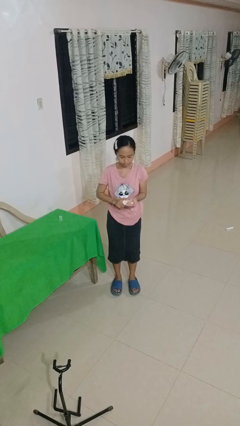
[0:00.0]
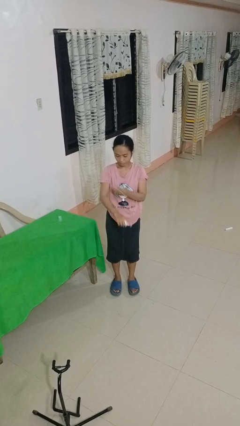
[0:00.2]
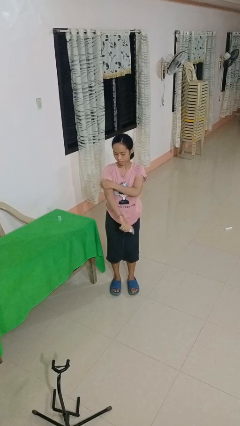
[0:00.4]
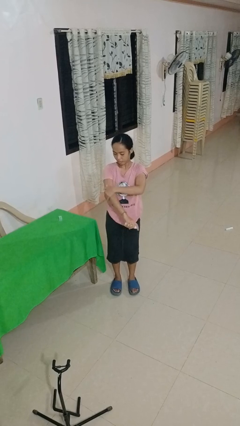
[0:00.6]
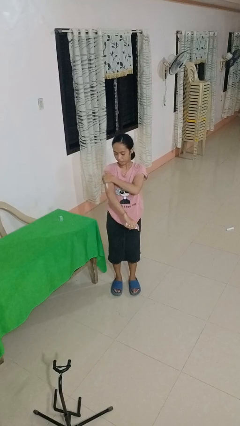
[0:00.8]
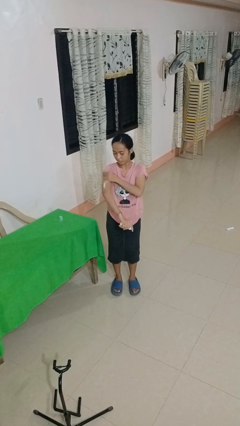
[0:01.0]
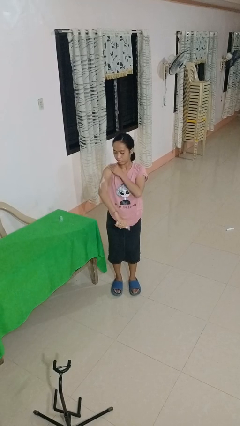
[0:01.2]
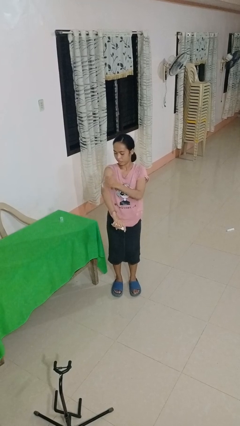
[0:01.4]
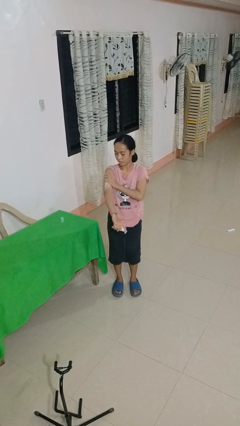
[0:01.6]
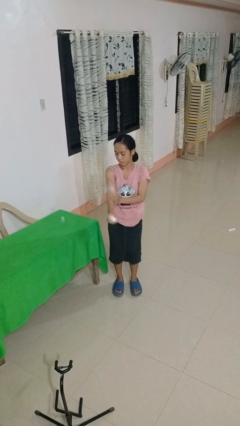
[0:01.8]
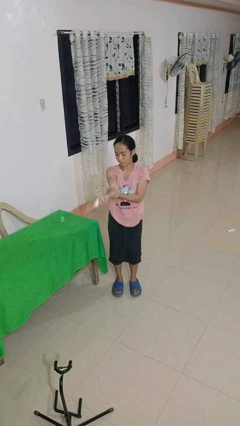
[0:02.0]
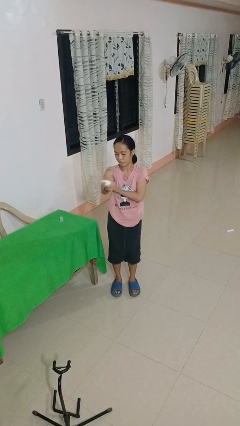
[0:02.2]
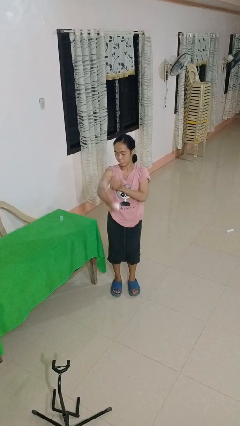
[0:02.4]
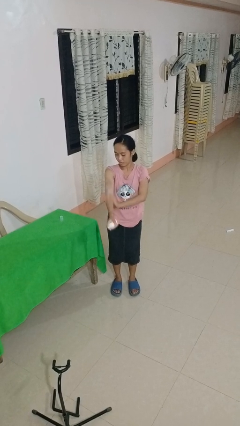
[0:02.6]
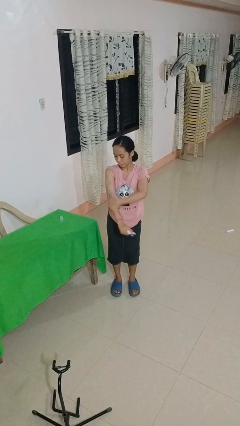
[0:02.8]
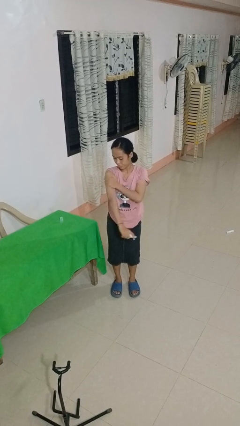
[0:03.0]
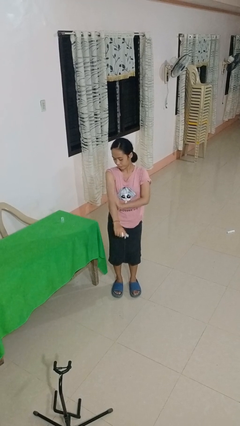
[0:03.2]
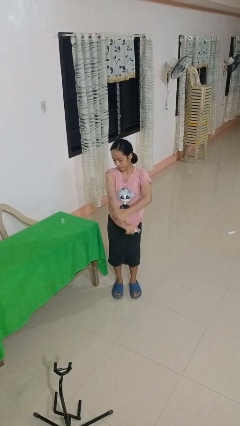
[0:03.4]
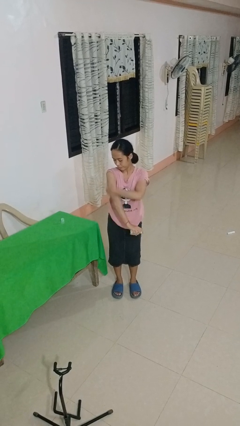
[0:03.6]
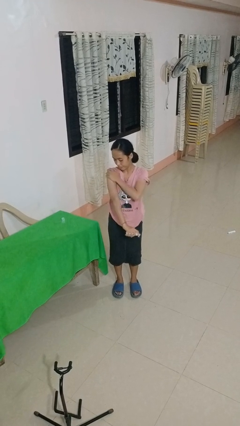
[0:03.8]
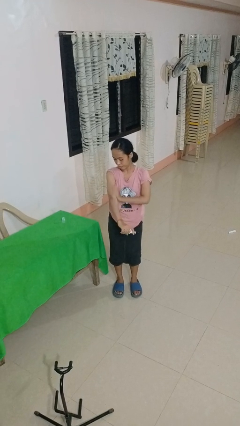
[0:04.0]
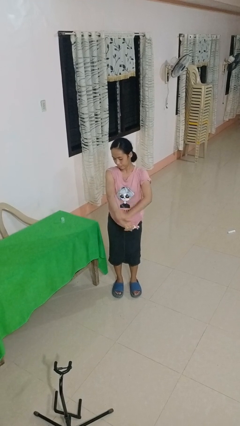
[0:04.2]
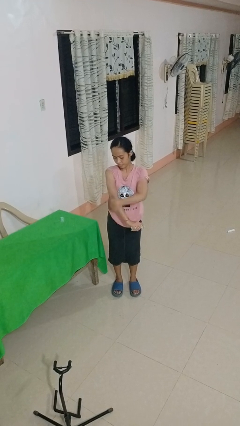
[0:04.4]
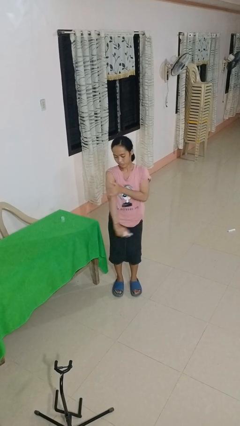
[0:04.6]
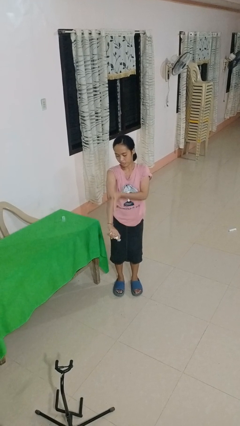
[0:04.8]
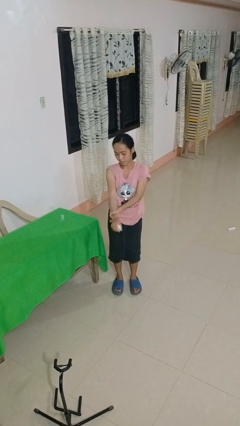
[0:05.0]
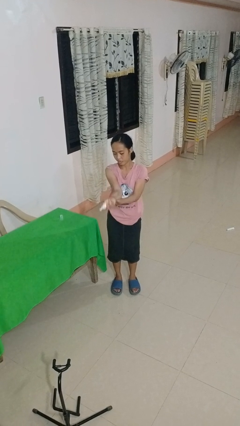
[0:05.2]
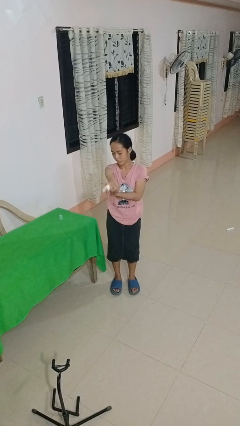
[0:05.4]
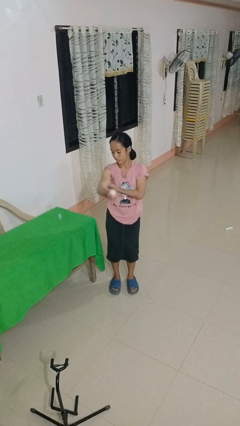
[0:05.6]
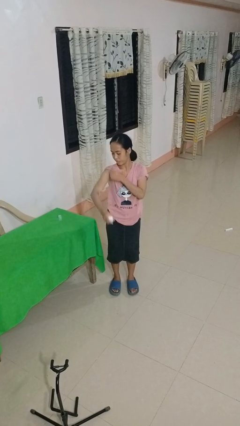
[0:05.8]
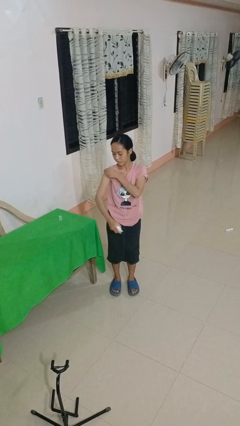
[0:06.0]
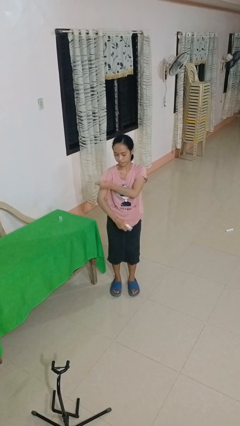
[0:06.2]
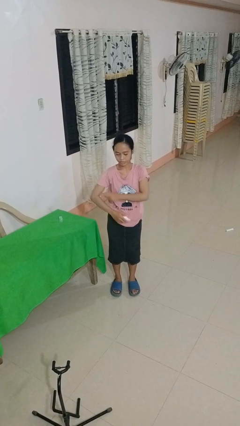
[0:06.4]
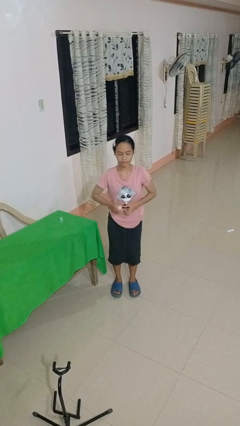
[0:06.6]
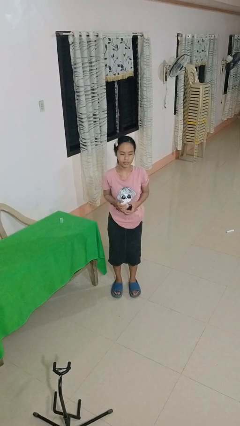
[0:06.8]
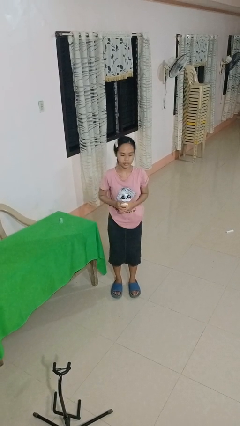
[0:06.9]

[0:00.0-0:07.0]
person applies sunscreen

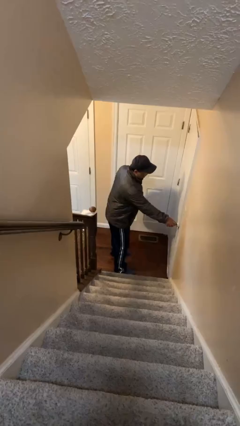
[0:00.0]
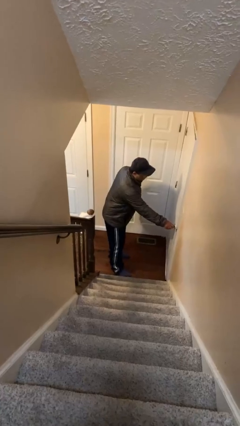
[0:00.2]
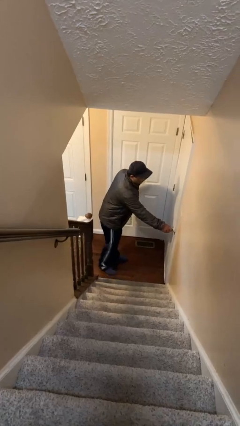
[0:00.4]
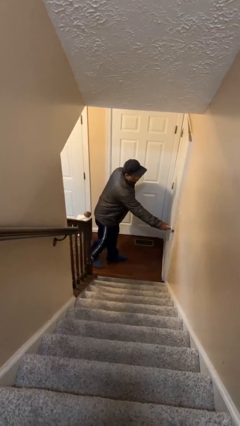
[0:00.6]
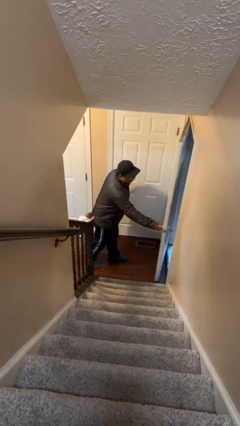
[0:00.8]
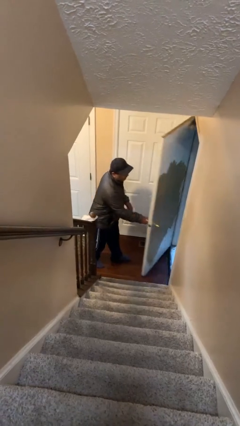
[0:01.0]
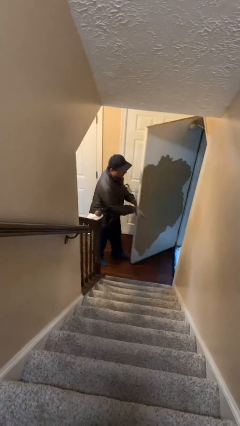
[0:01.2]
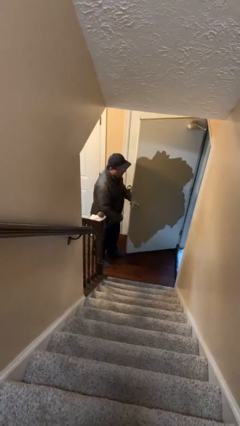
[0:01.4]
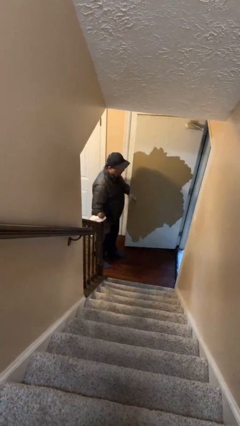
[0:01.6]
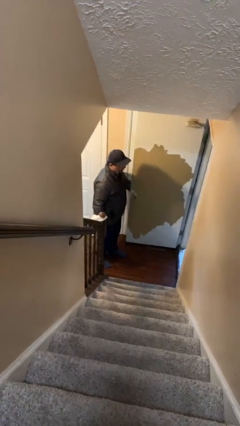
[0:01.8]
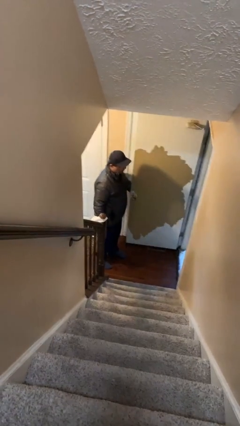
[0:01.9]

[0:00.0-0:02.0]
person opens facility door

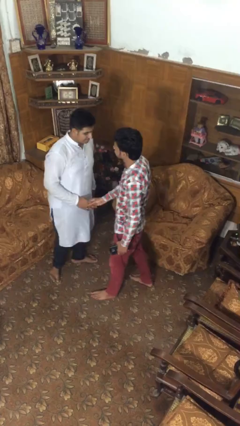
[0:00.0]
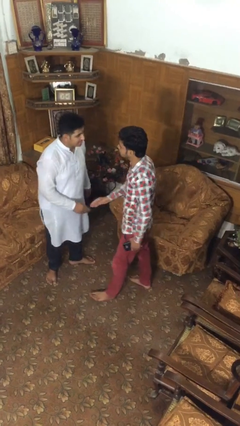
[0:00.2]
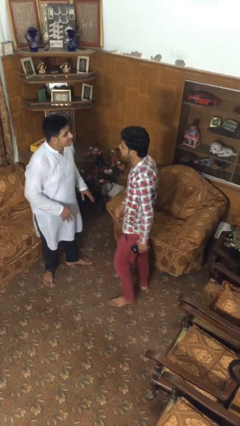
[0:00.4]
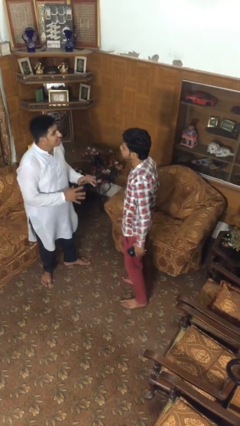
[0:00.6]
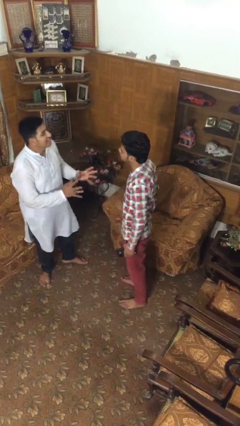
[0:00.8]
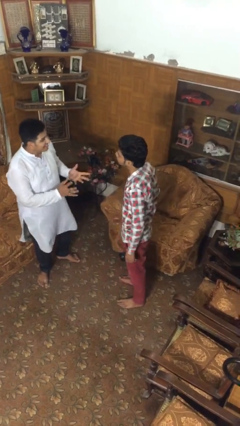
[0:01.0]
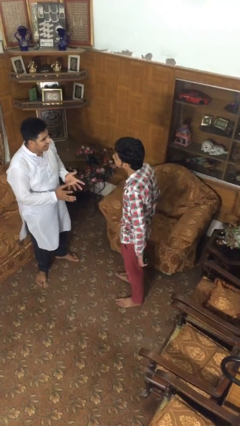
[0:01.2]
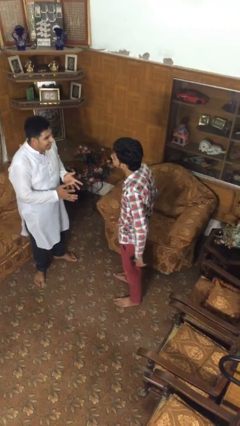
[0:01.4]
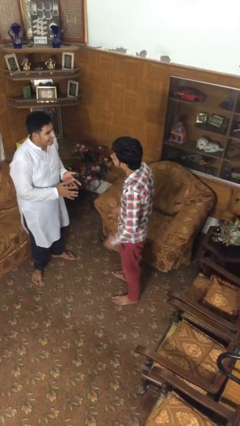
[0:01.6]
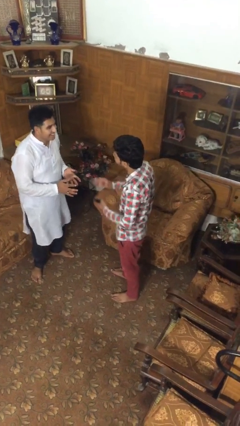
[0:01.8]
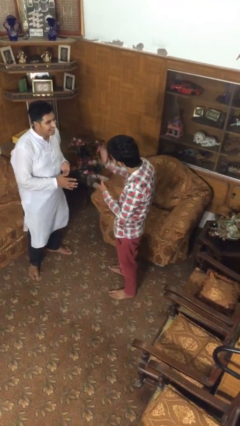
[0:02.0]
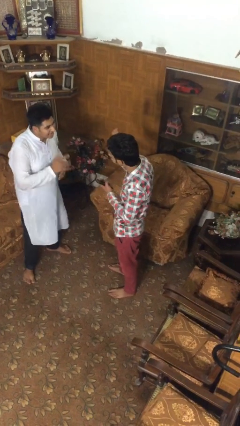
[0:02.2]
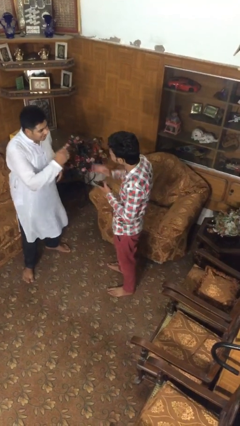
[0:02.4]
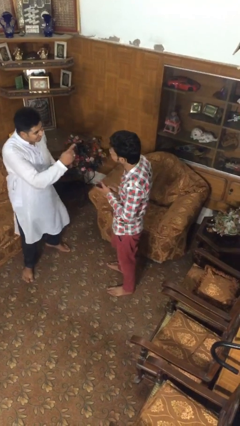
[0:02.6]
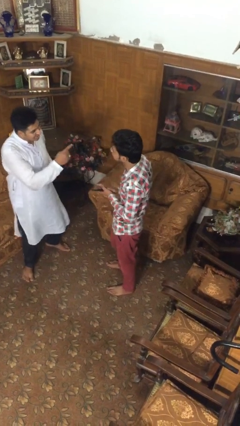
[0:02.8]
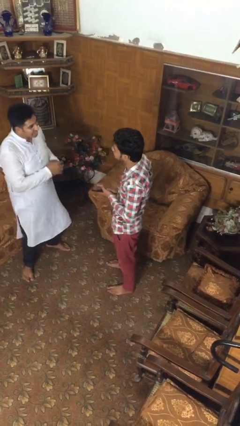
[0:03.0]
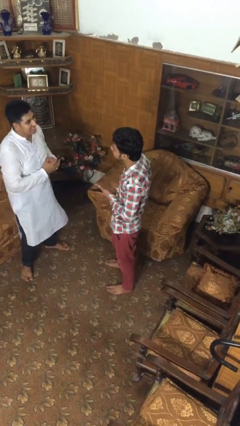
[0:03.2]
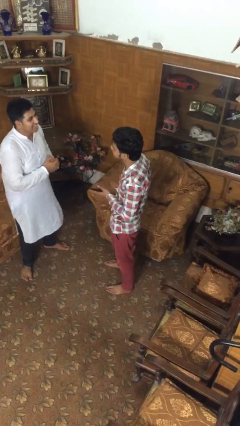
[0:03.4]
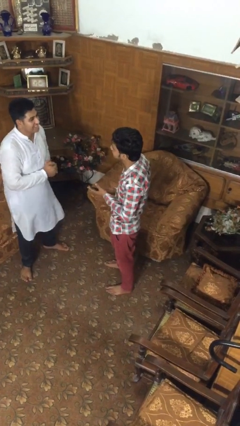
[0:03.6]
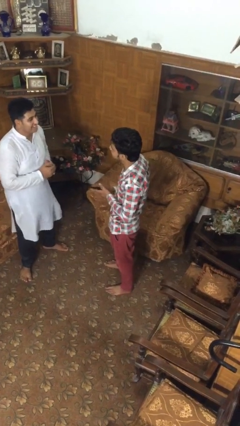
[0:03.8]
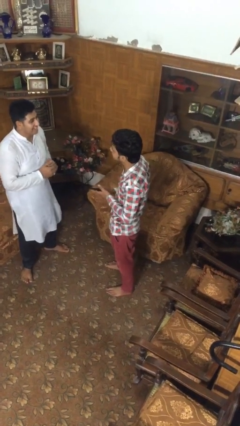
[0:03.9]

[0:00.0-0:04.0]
person talks to person

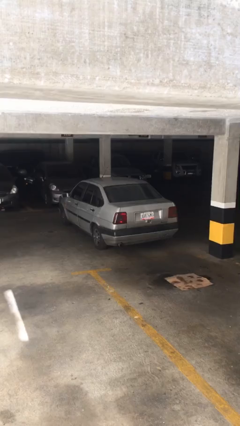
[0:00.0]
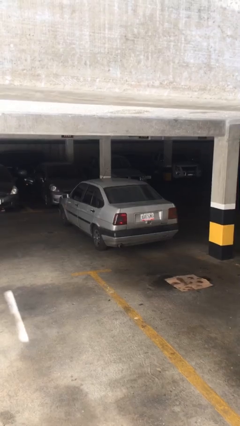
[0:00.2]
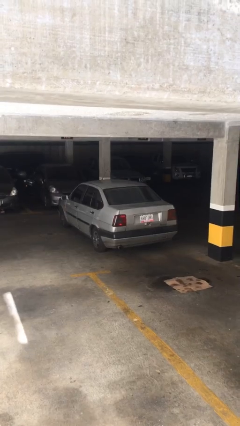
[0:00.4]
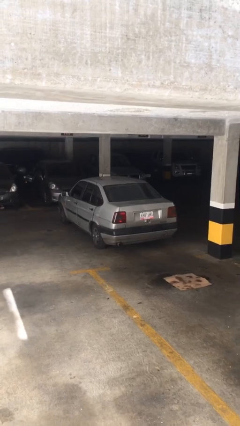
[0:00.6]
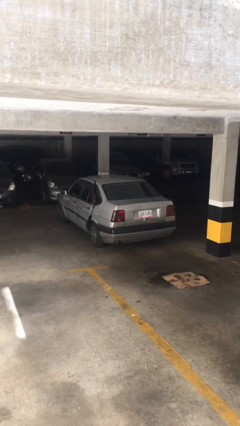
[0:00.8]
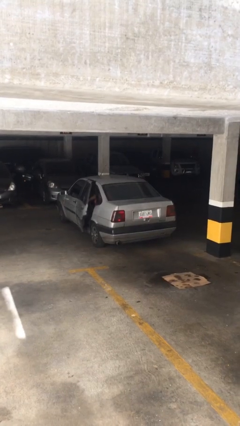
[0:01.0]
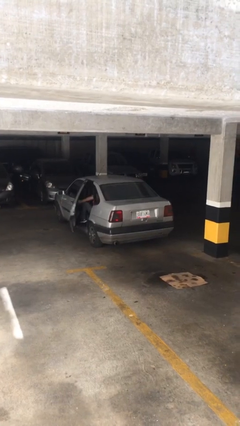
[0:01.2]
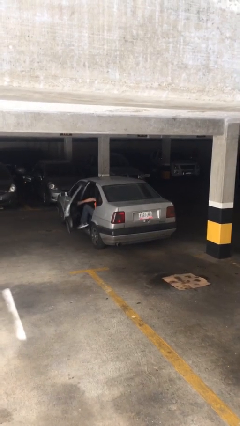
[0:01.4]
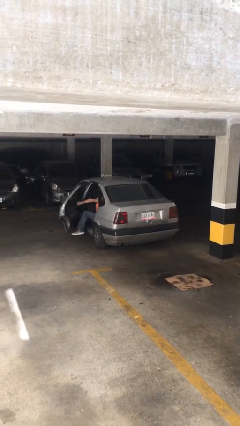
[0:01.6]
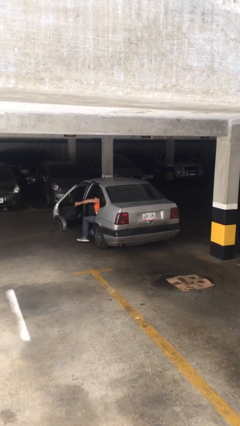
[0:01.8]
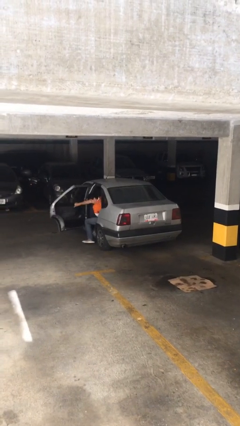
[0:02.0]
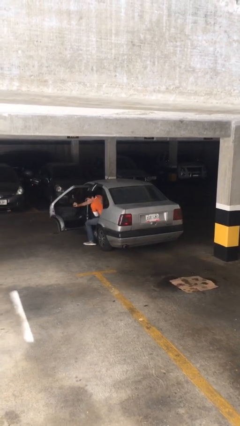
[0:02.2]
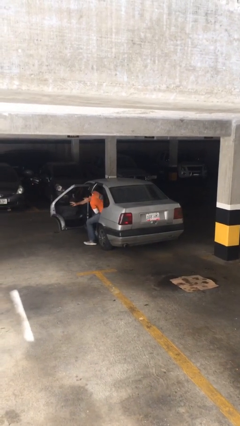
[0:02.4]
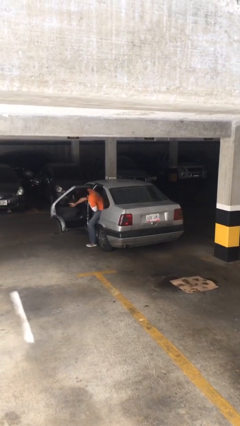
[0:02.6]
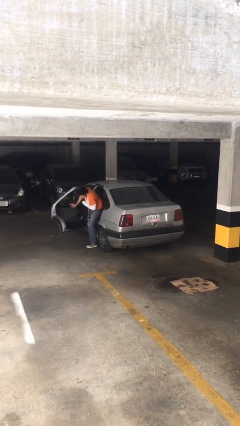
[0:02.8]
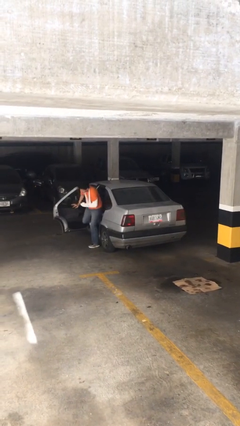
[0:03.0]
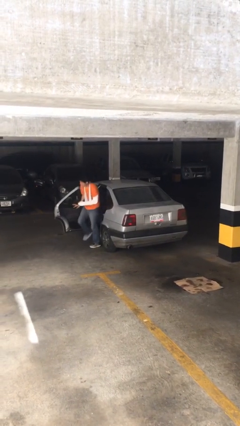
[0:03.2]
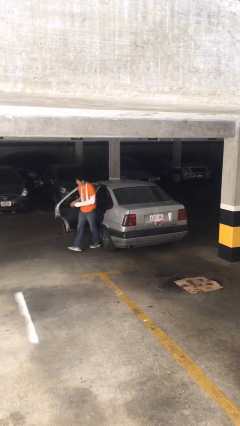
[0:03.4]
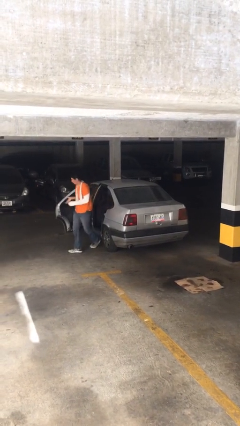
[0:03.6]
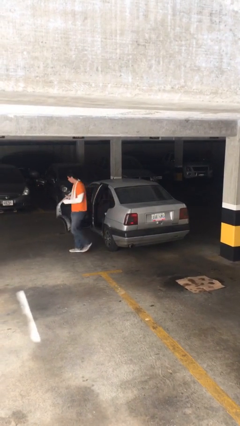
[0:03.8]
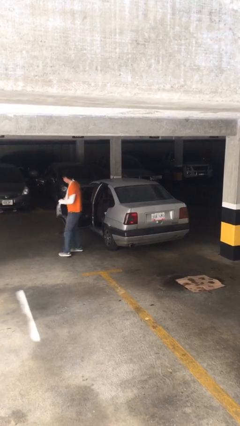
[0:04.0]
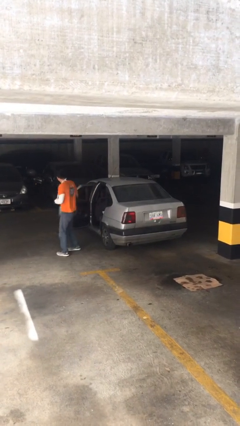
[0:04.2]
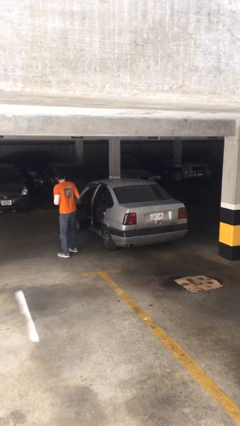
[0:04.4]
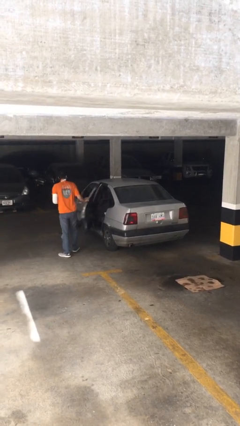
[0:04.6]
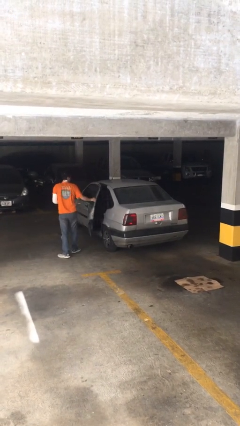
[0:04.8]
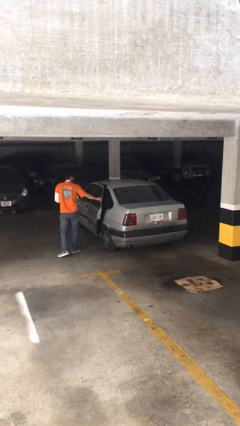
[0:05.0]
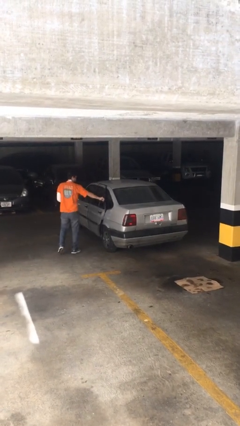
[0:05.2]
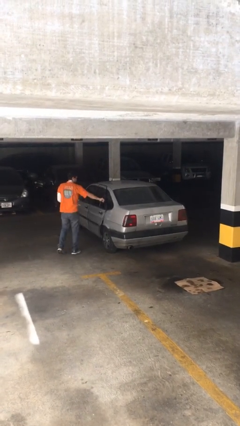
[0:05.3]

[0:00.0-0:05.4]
car drops off person
